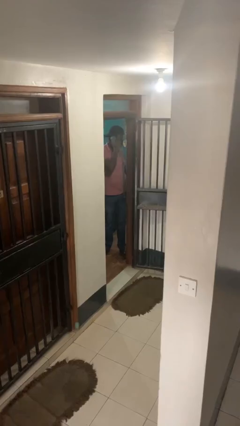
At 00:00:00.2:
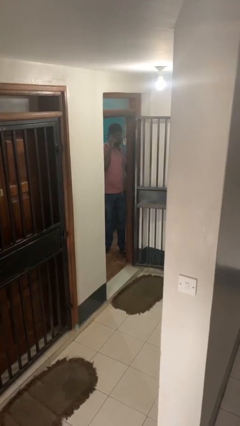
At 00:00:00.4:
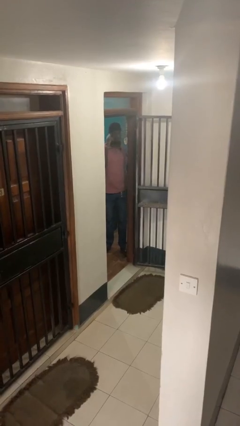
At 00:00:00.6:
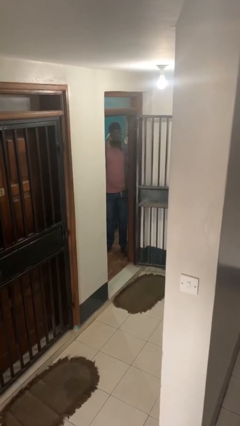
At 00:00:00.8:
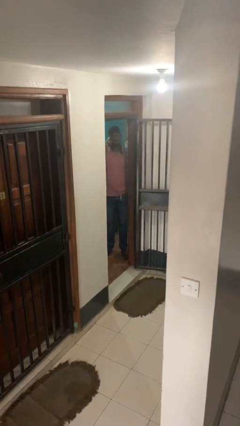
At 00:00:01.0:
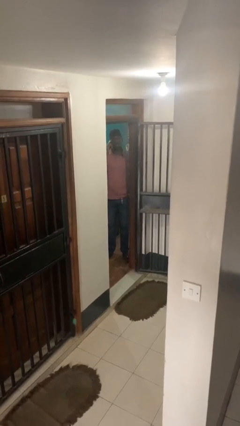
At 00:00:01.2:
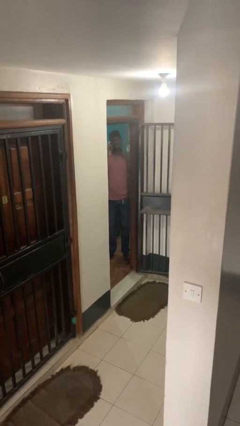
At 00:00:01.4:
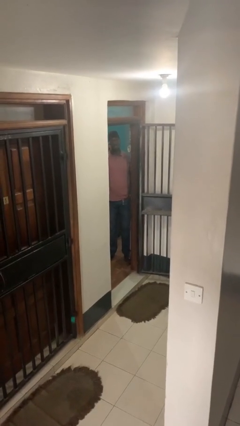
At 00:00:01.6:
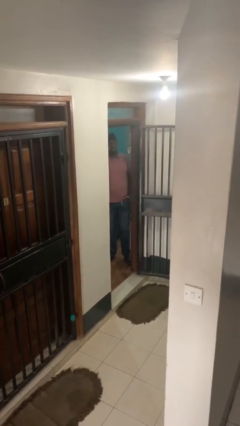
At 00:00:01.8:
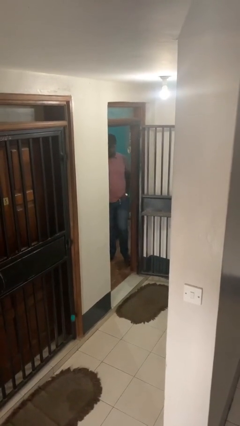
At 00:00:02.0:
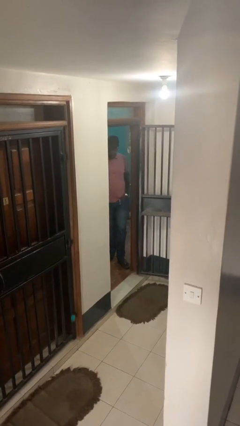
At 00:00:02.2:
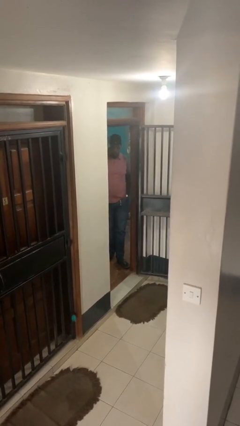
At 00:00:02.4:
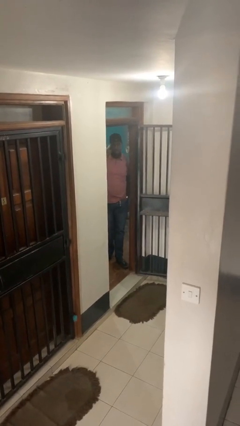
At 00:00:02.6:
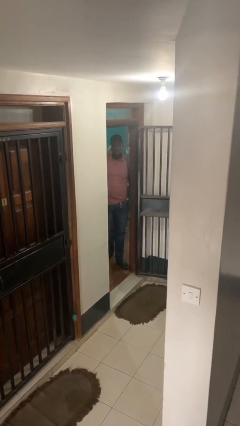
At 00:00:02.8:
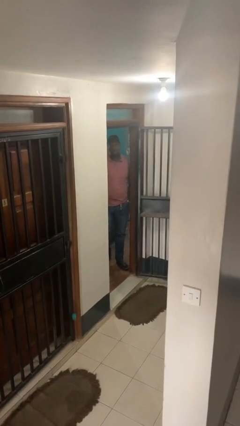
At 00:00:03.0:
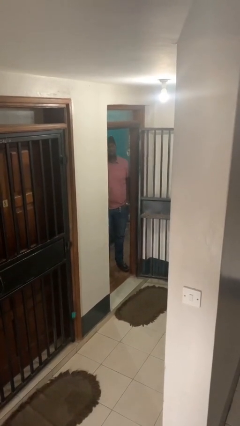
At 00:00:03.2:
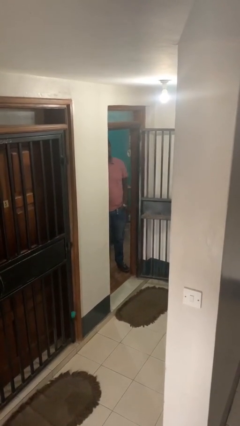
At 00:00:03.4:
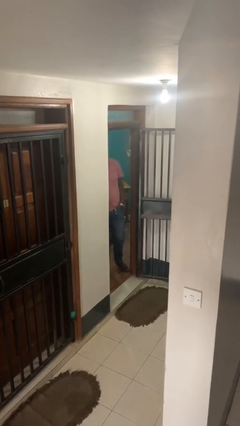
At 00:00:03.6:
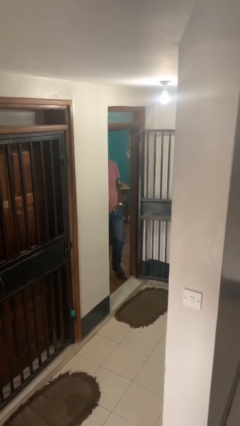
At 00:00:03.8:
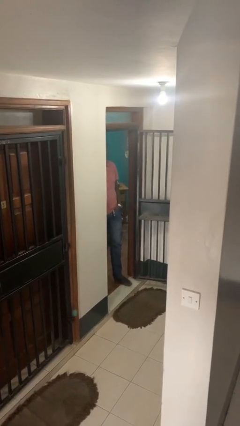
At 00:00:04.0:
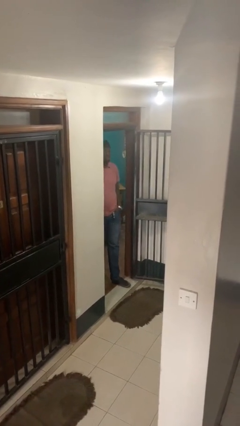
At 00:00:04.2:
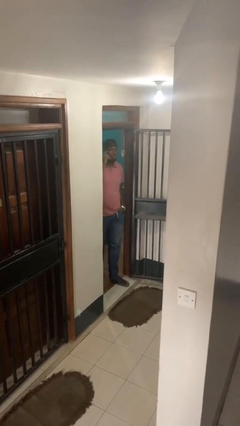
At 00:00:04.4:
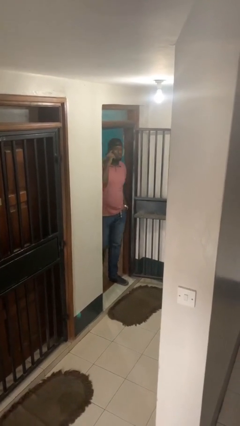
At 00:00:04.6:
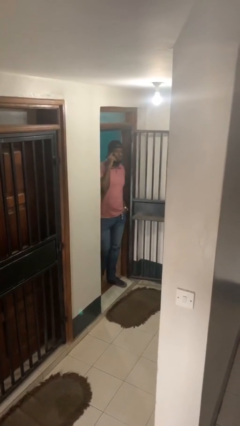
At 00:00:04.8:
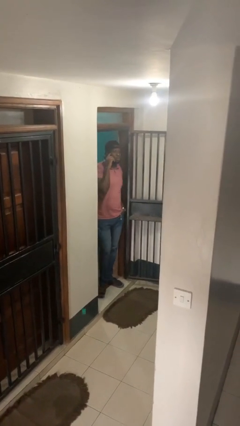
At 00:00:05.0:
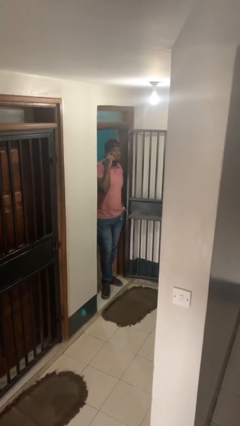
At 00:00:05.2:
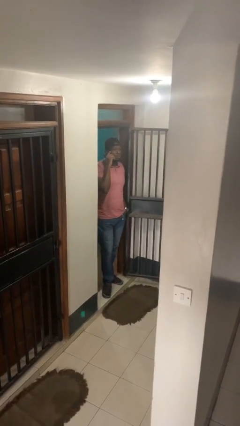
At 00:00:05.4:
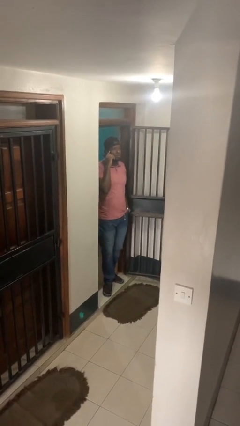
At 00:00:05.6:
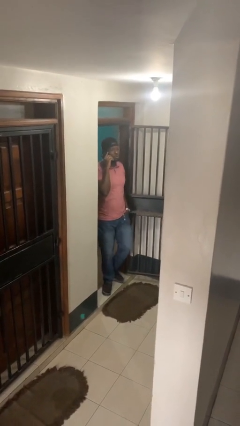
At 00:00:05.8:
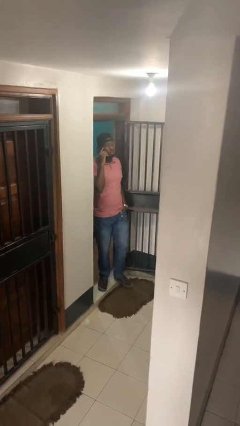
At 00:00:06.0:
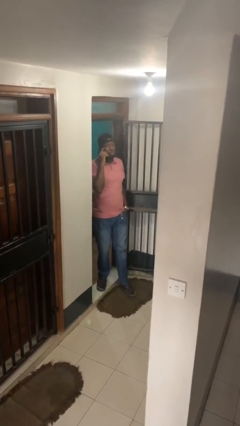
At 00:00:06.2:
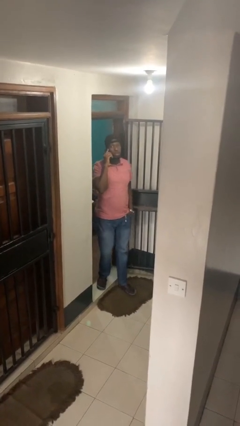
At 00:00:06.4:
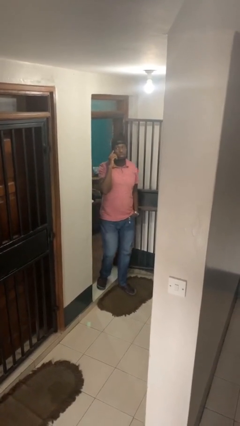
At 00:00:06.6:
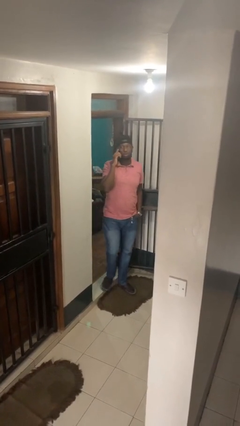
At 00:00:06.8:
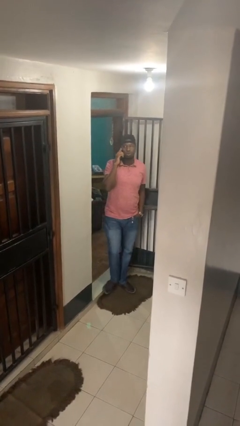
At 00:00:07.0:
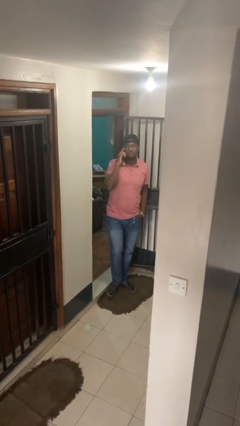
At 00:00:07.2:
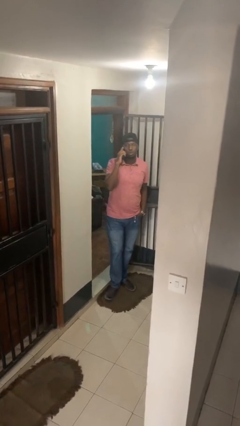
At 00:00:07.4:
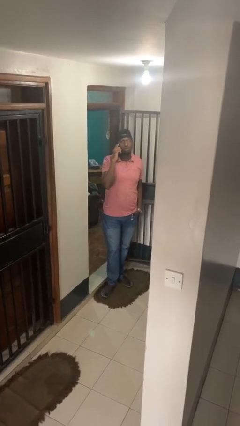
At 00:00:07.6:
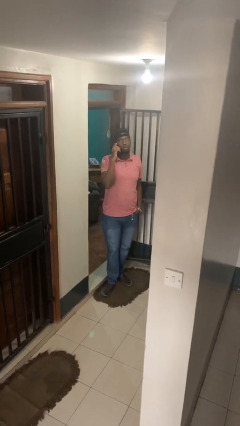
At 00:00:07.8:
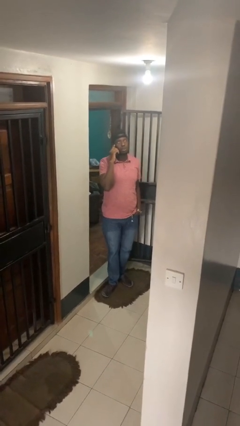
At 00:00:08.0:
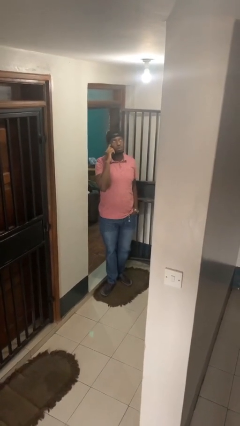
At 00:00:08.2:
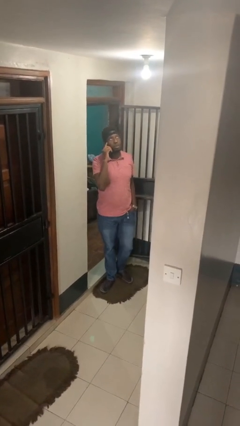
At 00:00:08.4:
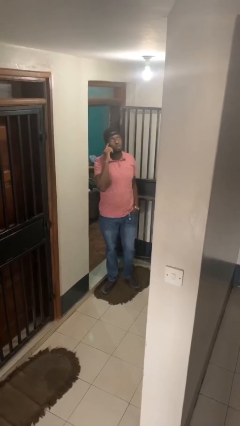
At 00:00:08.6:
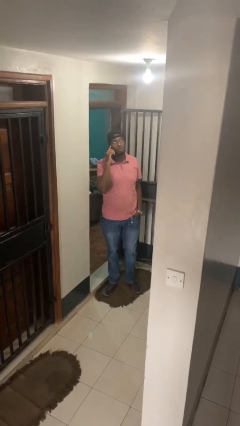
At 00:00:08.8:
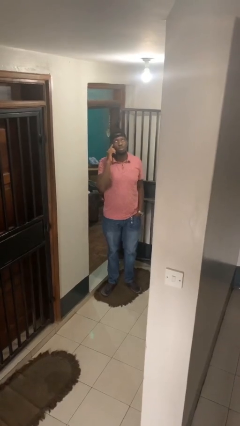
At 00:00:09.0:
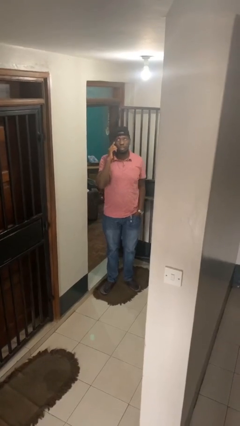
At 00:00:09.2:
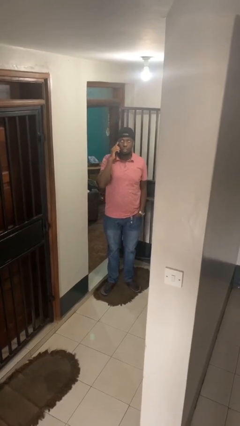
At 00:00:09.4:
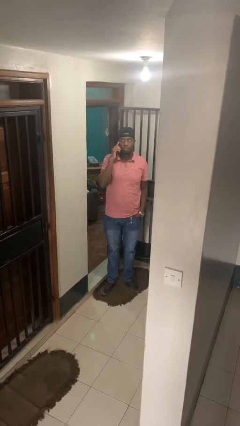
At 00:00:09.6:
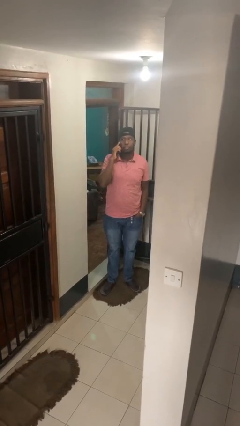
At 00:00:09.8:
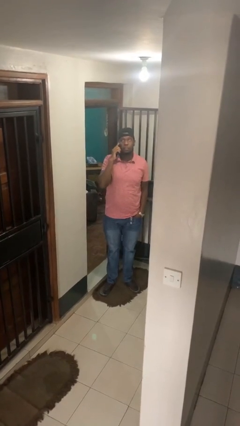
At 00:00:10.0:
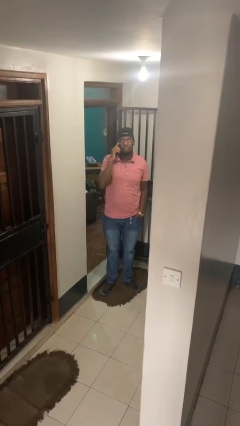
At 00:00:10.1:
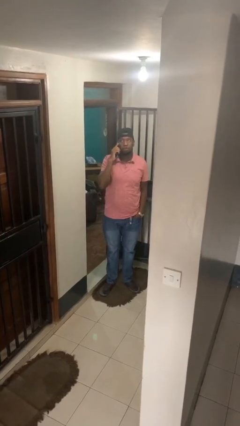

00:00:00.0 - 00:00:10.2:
person enters scene through structure

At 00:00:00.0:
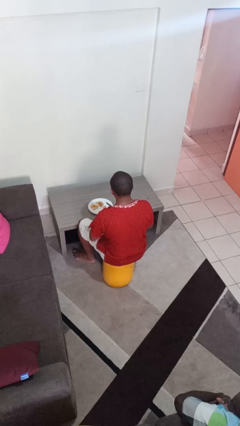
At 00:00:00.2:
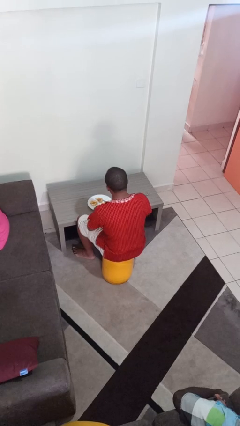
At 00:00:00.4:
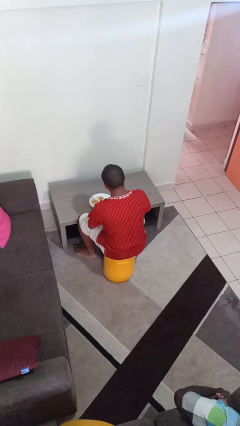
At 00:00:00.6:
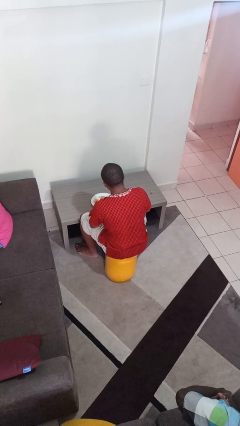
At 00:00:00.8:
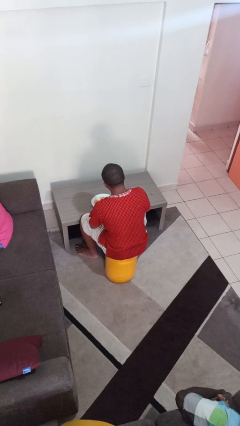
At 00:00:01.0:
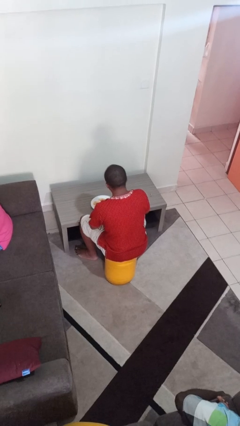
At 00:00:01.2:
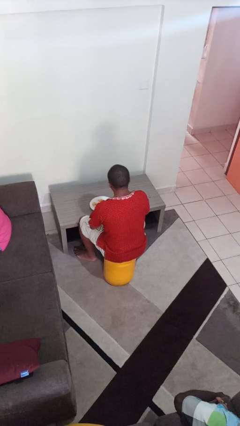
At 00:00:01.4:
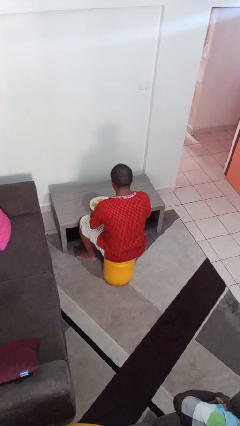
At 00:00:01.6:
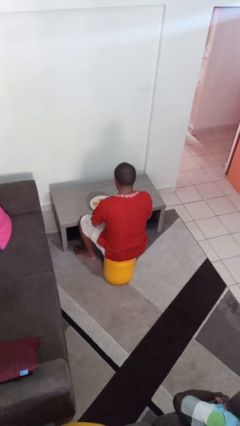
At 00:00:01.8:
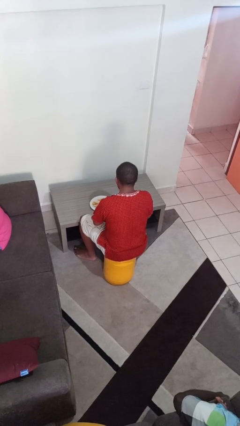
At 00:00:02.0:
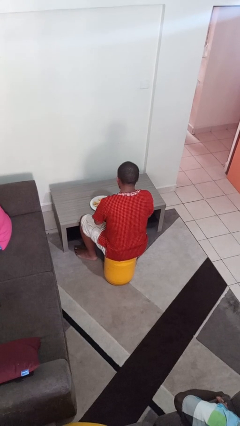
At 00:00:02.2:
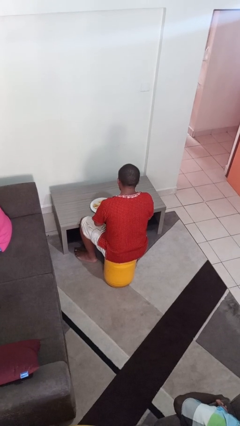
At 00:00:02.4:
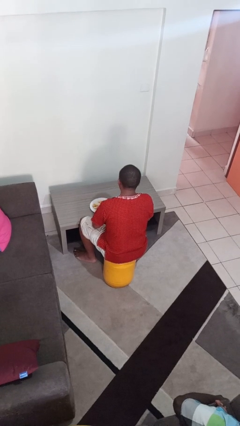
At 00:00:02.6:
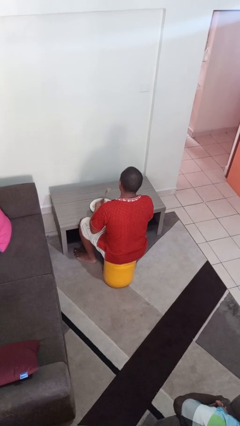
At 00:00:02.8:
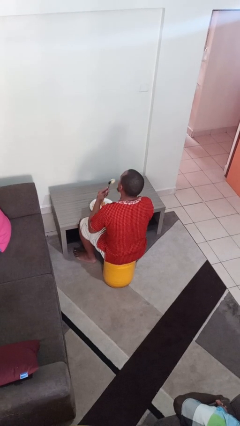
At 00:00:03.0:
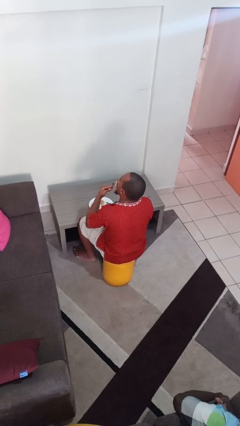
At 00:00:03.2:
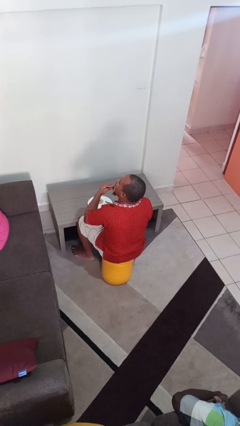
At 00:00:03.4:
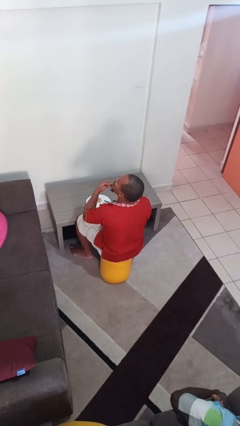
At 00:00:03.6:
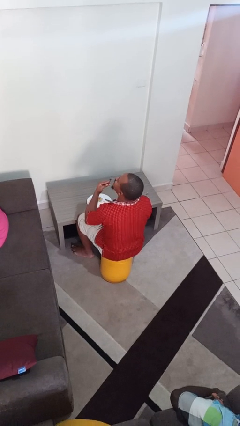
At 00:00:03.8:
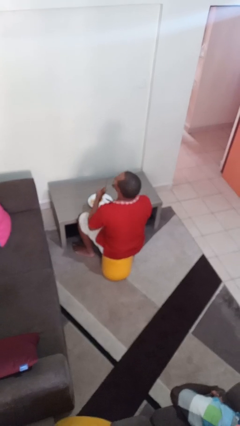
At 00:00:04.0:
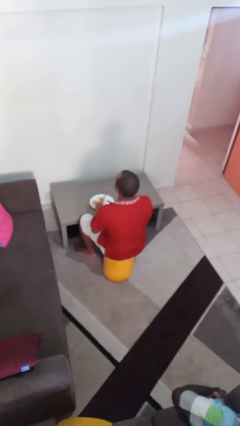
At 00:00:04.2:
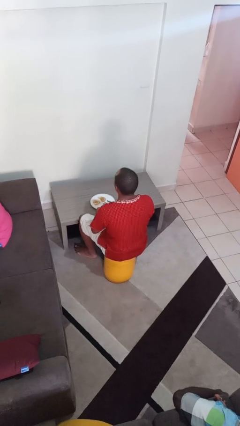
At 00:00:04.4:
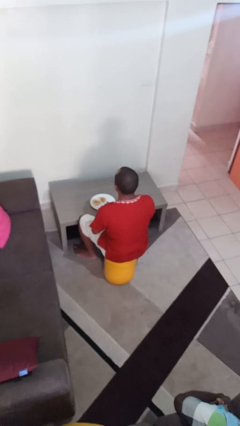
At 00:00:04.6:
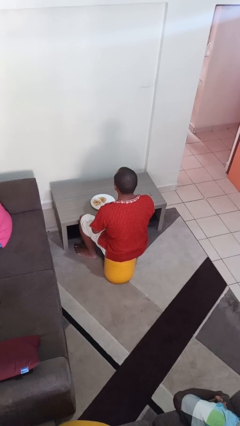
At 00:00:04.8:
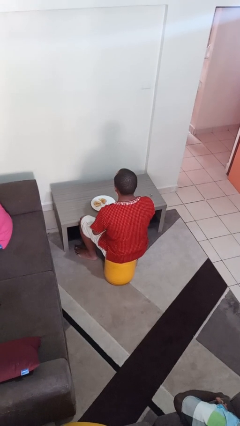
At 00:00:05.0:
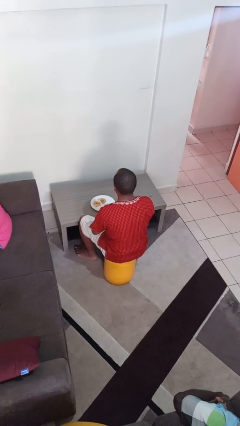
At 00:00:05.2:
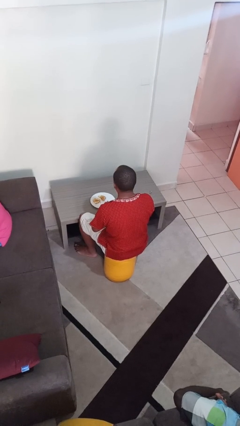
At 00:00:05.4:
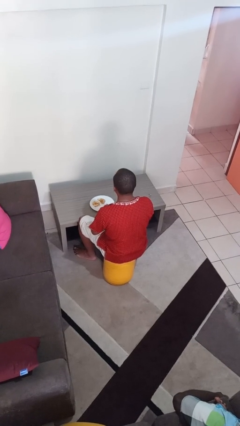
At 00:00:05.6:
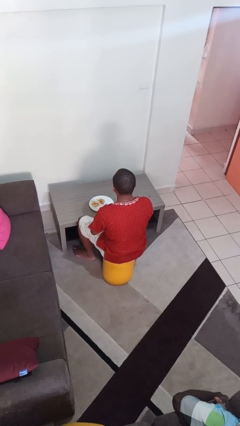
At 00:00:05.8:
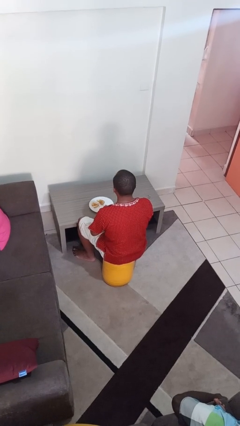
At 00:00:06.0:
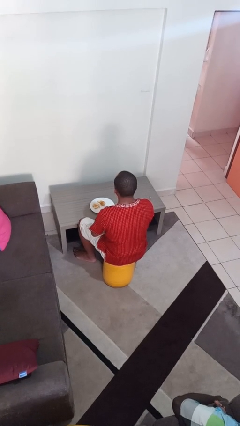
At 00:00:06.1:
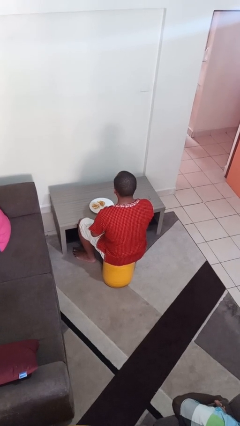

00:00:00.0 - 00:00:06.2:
person eats with utensil

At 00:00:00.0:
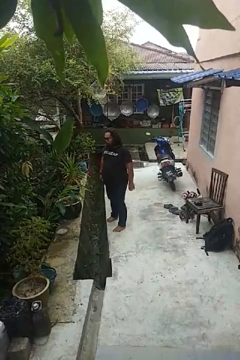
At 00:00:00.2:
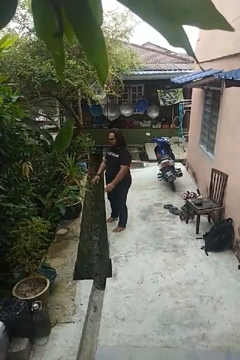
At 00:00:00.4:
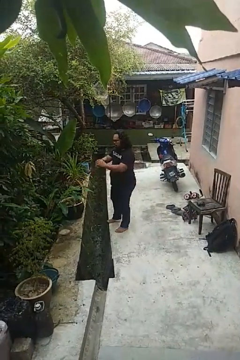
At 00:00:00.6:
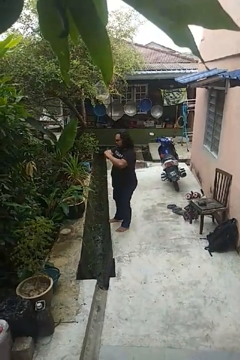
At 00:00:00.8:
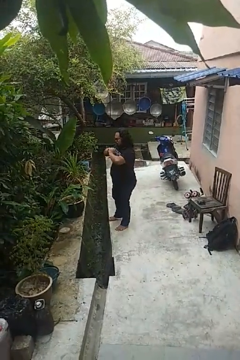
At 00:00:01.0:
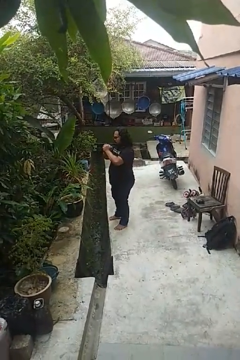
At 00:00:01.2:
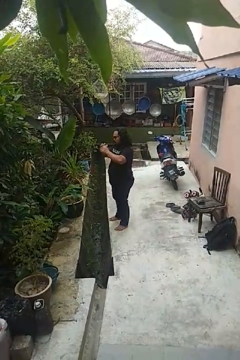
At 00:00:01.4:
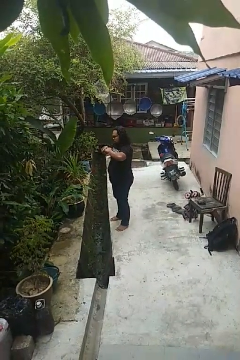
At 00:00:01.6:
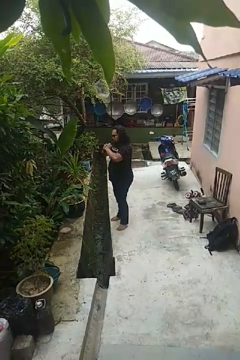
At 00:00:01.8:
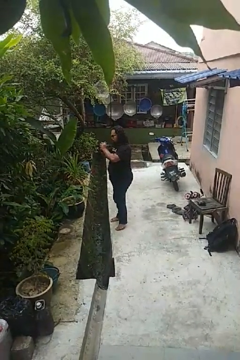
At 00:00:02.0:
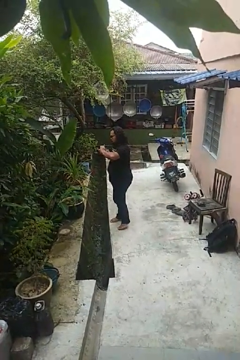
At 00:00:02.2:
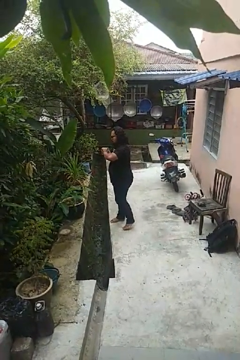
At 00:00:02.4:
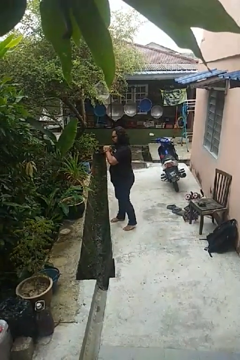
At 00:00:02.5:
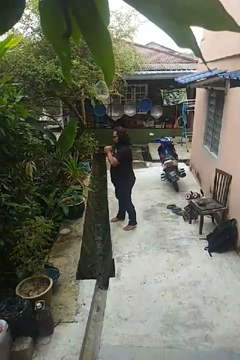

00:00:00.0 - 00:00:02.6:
person cracks knuckles
